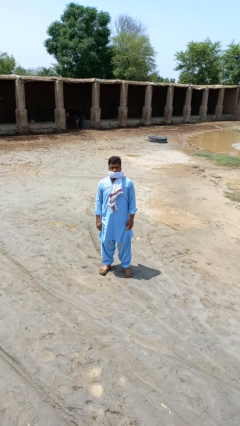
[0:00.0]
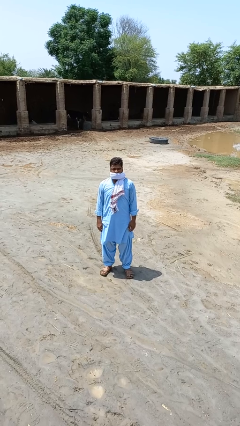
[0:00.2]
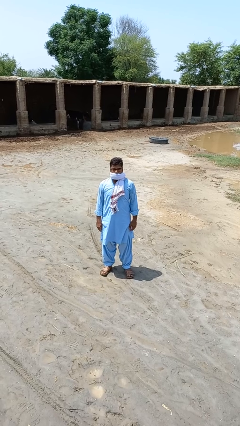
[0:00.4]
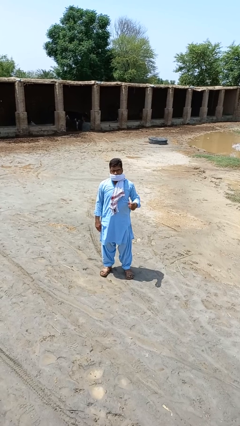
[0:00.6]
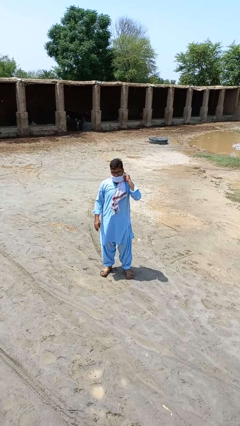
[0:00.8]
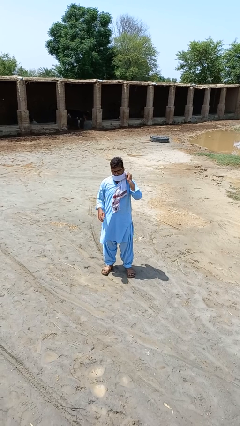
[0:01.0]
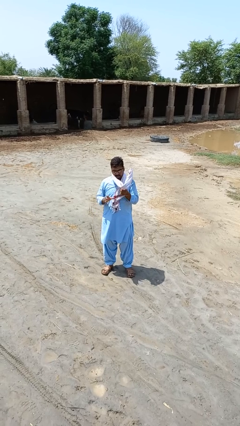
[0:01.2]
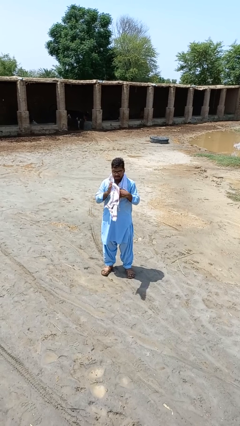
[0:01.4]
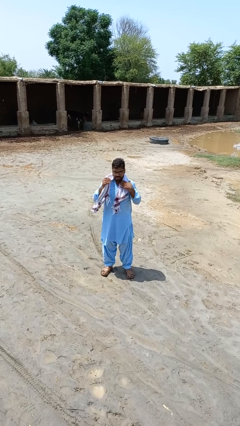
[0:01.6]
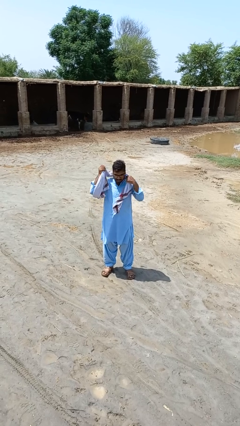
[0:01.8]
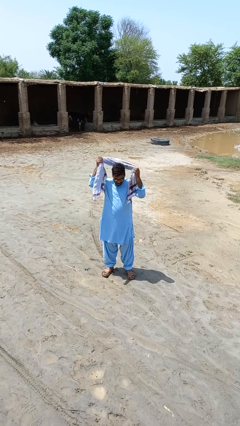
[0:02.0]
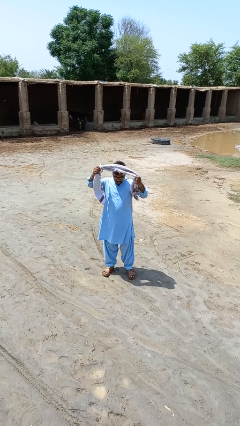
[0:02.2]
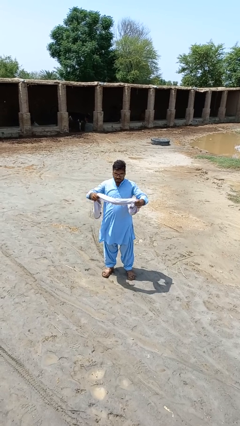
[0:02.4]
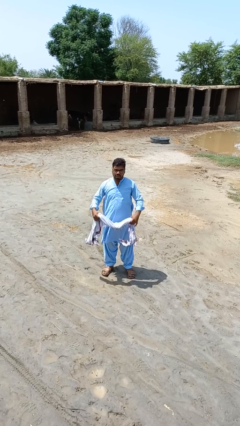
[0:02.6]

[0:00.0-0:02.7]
person takes off scarf

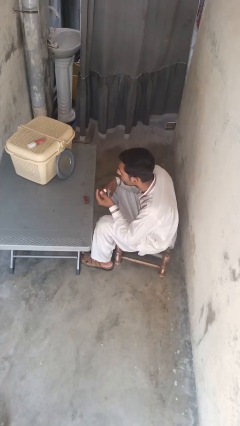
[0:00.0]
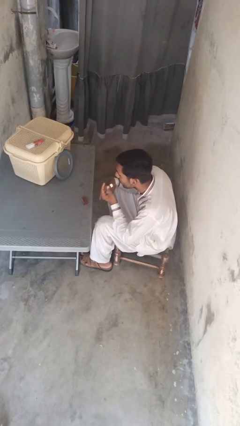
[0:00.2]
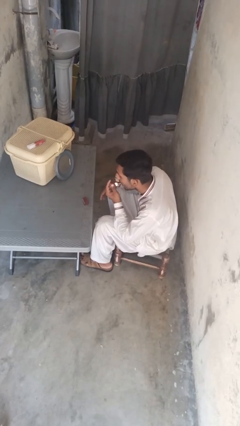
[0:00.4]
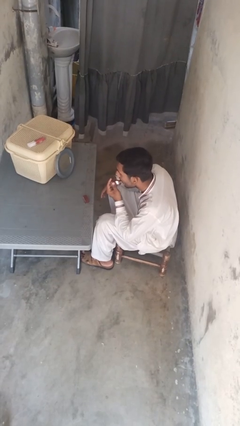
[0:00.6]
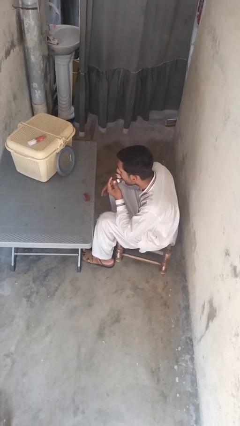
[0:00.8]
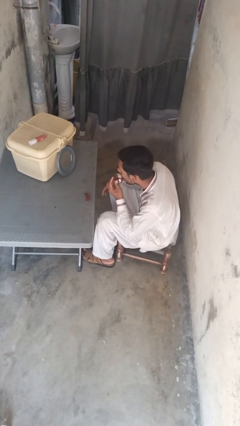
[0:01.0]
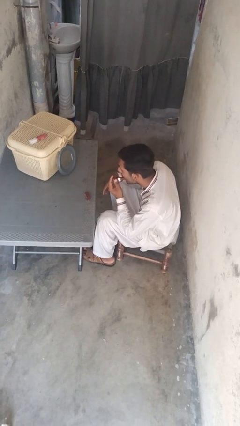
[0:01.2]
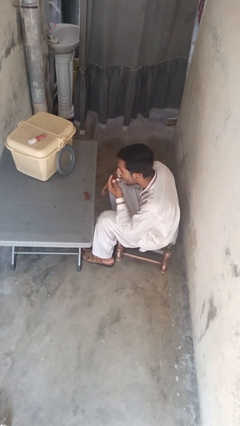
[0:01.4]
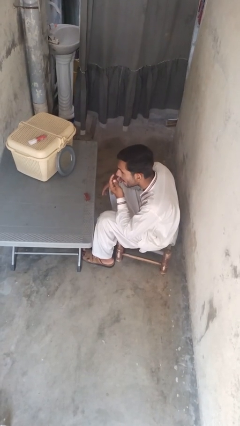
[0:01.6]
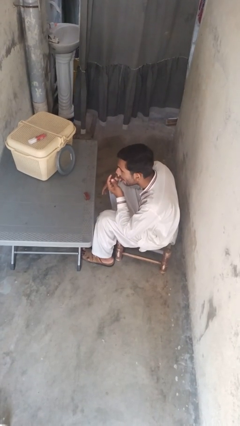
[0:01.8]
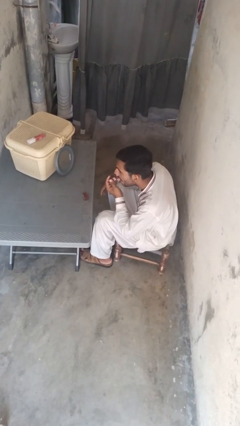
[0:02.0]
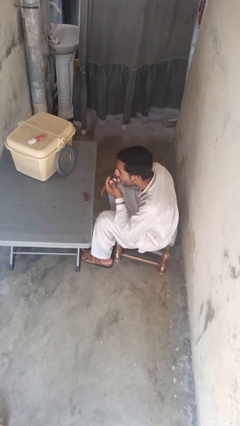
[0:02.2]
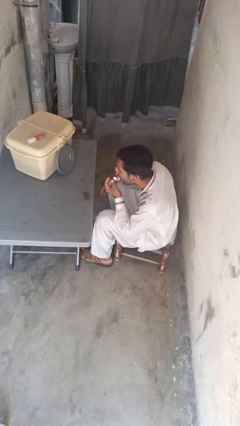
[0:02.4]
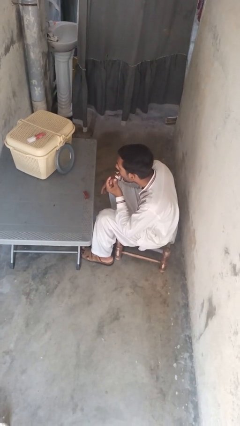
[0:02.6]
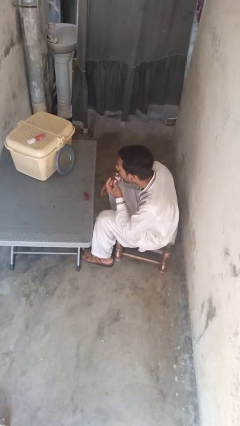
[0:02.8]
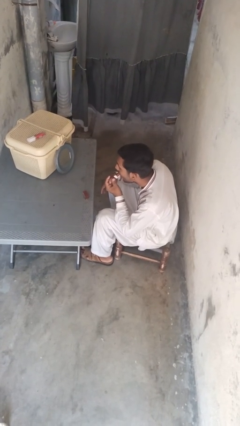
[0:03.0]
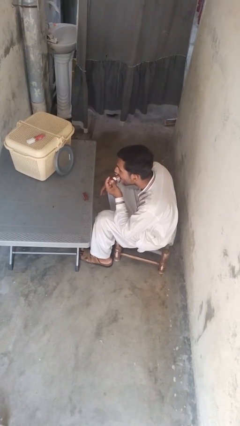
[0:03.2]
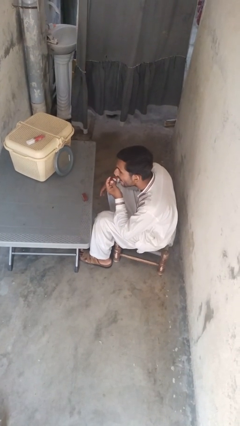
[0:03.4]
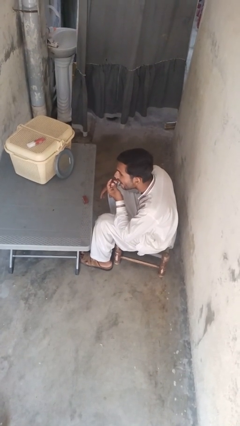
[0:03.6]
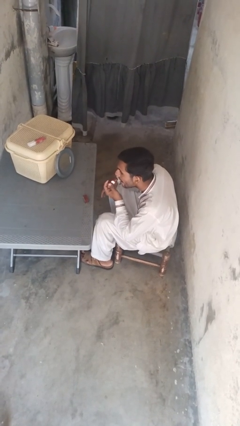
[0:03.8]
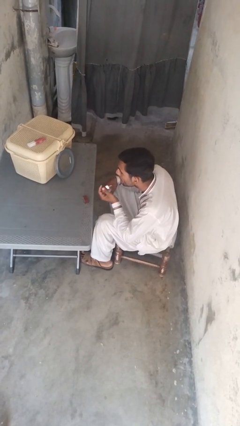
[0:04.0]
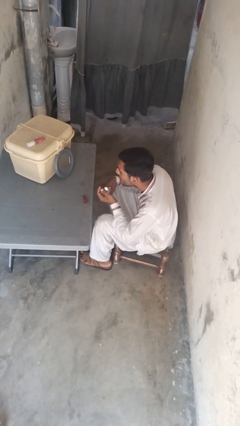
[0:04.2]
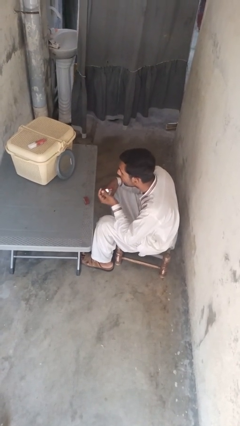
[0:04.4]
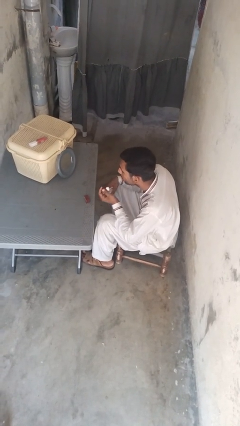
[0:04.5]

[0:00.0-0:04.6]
person applies lip makeup

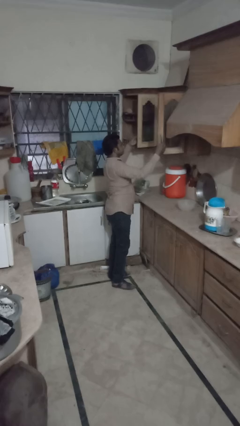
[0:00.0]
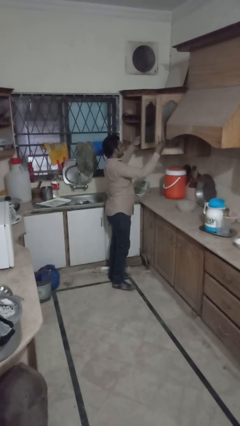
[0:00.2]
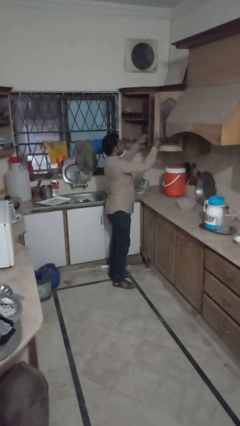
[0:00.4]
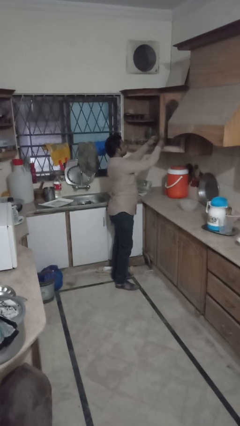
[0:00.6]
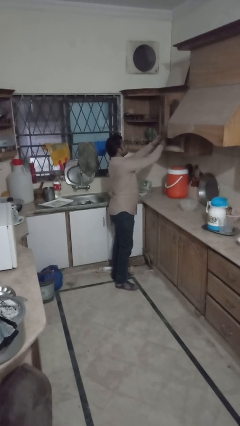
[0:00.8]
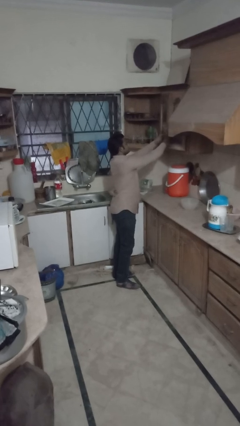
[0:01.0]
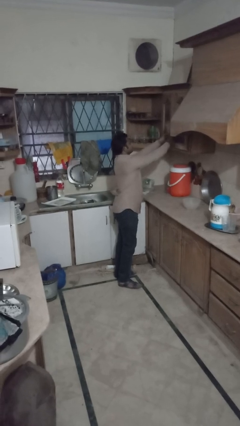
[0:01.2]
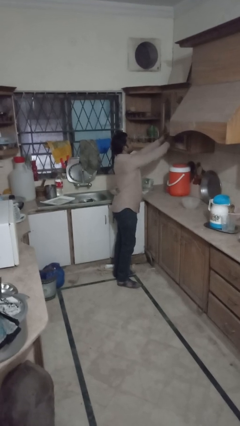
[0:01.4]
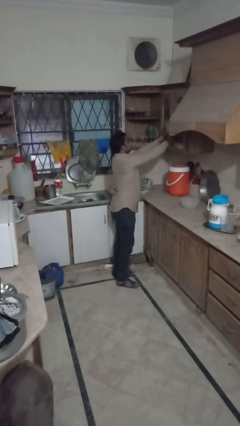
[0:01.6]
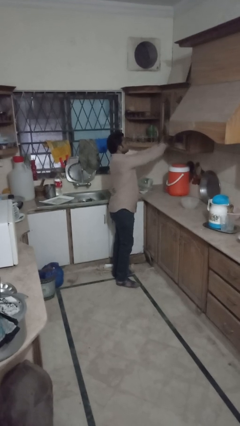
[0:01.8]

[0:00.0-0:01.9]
person closes cabinet

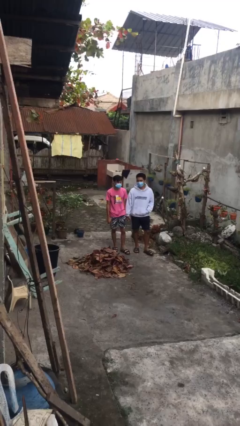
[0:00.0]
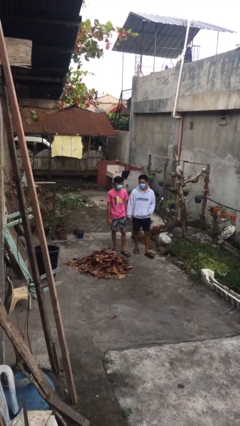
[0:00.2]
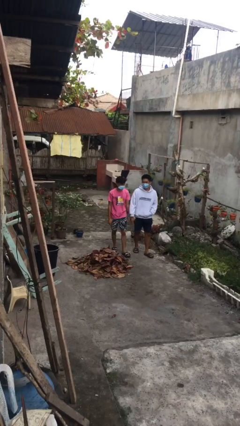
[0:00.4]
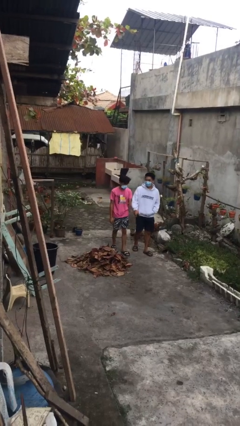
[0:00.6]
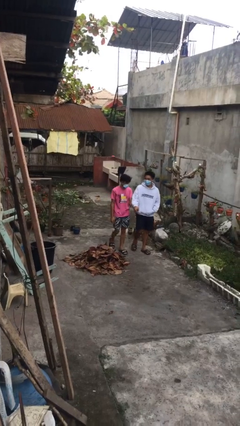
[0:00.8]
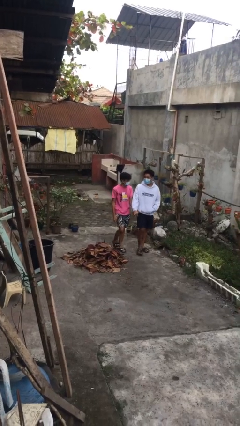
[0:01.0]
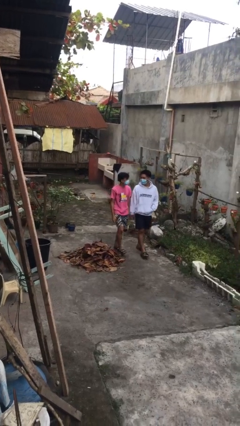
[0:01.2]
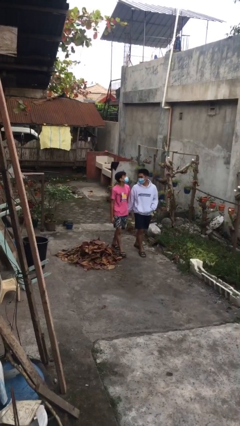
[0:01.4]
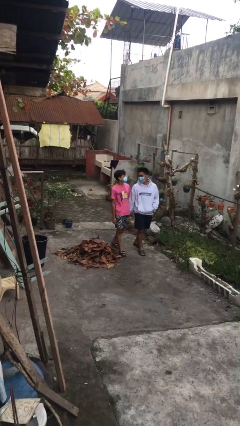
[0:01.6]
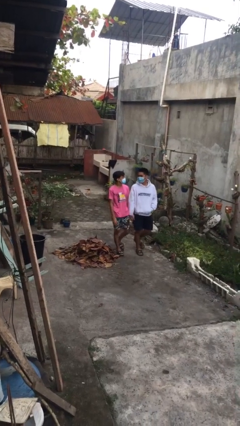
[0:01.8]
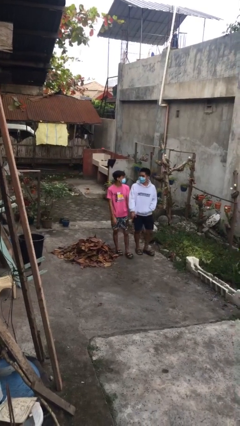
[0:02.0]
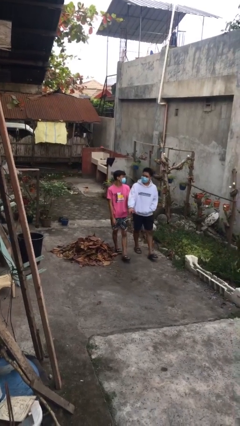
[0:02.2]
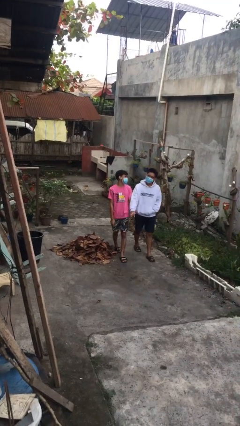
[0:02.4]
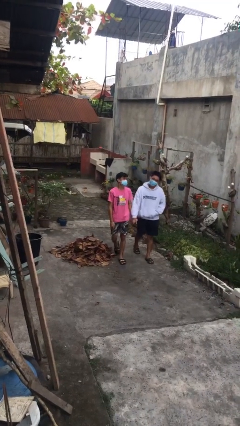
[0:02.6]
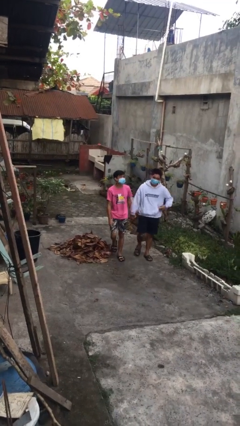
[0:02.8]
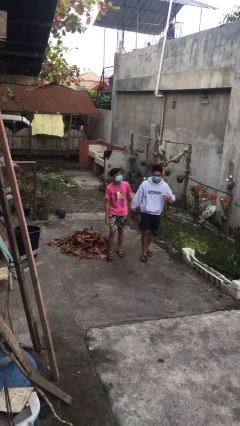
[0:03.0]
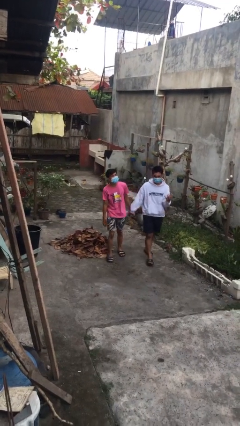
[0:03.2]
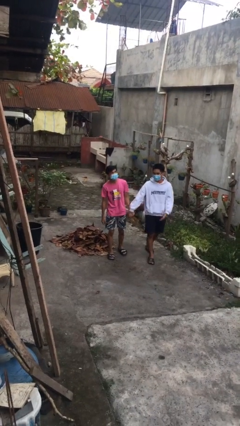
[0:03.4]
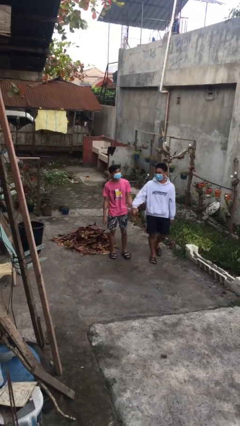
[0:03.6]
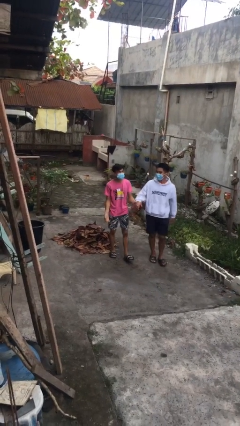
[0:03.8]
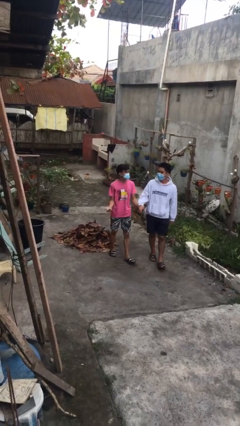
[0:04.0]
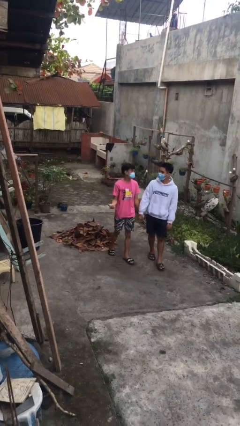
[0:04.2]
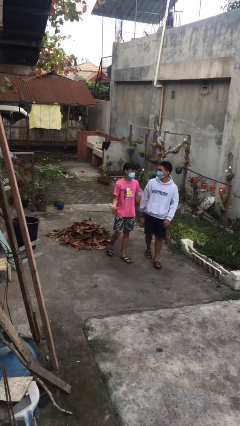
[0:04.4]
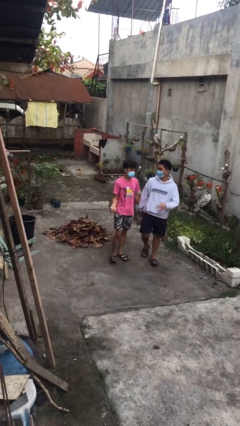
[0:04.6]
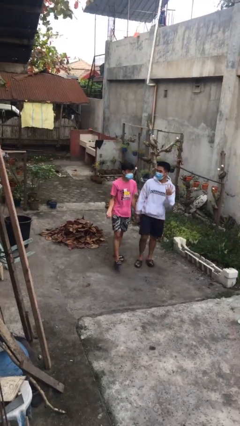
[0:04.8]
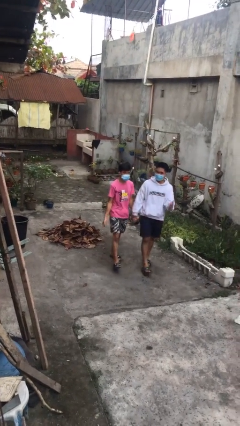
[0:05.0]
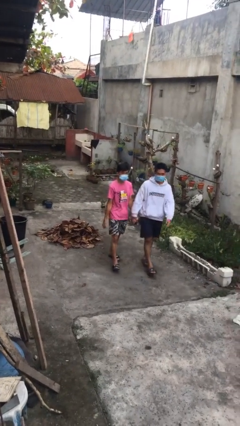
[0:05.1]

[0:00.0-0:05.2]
person holds hand

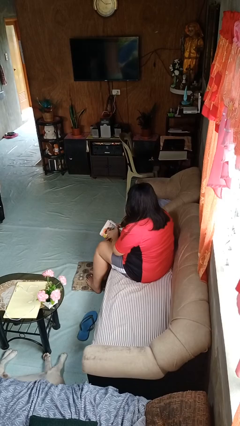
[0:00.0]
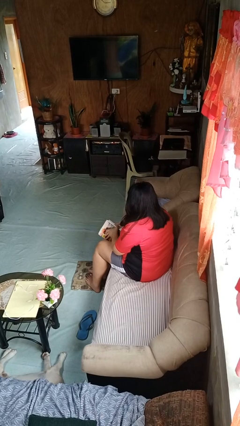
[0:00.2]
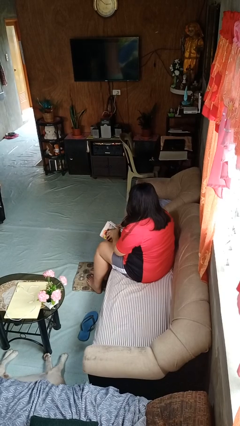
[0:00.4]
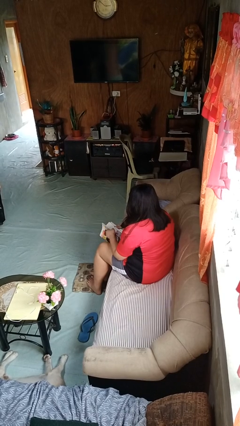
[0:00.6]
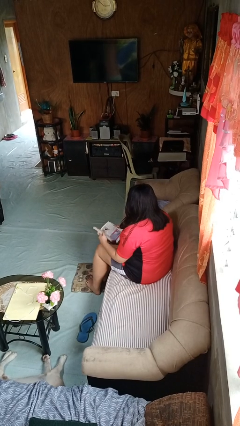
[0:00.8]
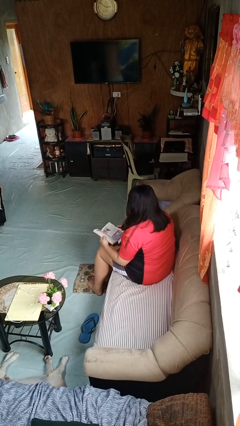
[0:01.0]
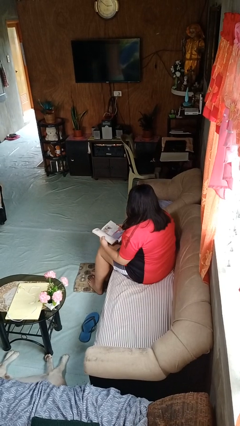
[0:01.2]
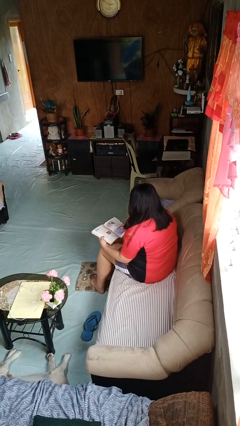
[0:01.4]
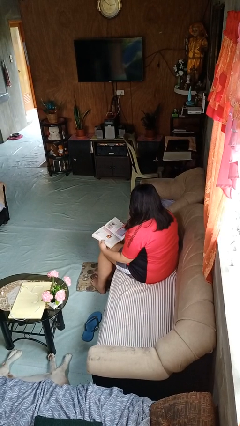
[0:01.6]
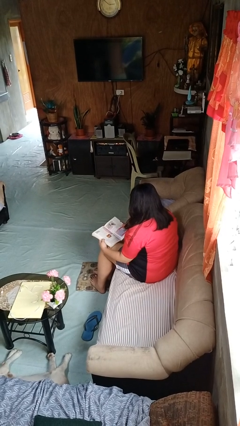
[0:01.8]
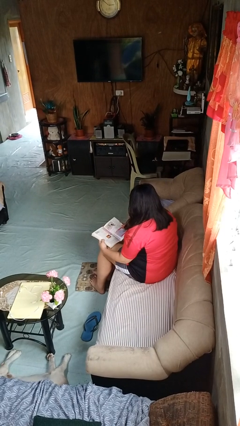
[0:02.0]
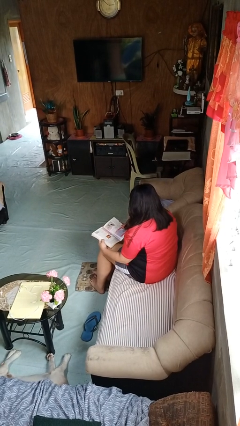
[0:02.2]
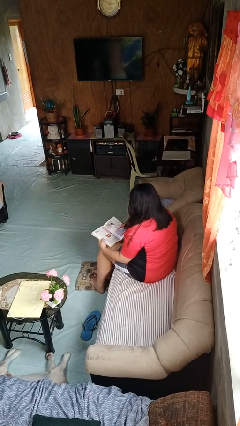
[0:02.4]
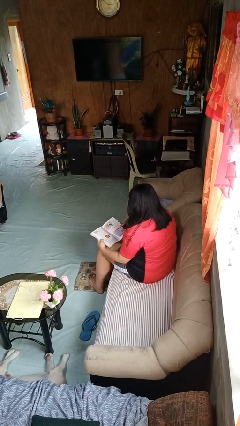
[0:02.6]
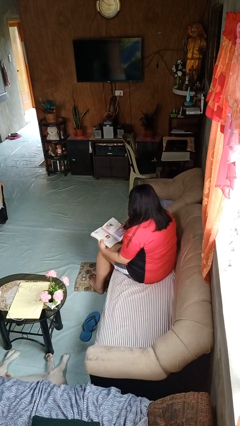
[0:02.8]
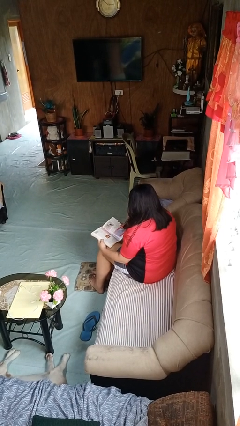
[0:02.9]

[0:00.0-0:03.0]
person reads book

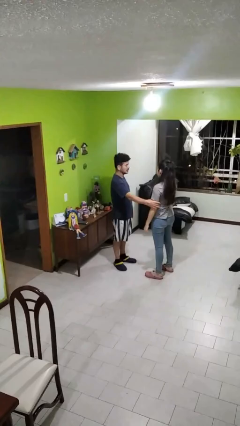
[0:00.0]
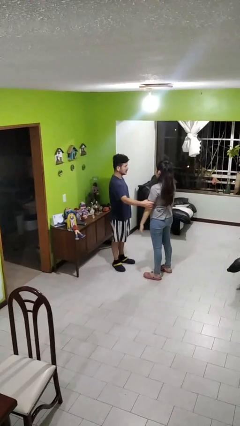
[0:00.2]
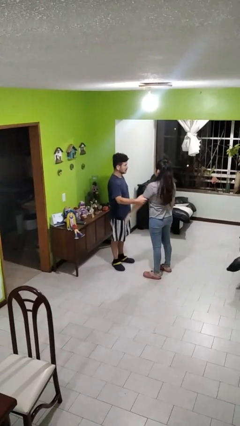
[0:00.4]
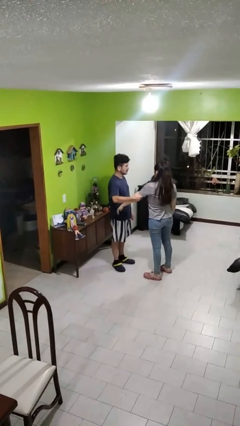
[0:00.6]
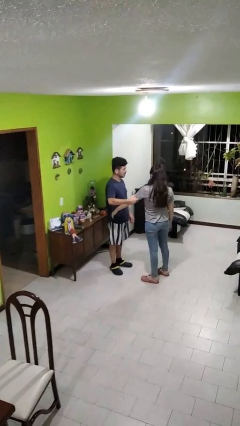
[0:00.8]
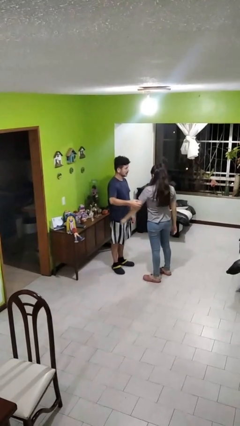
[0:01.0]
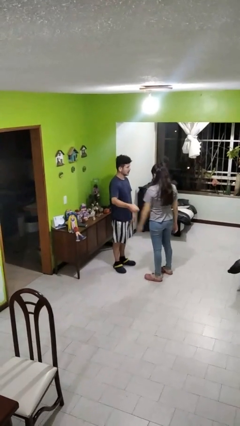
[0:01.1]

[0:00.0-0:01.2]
person grabs person by bicep
